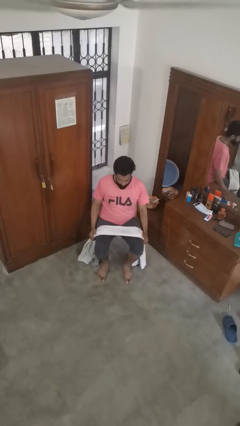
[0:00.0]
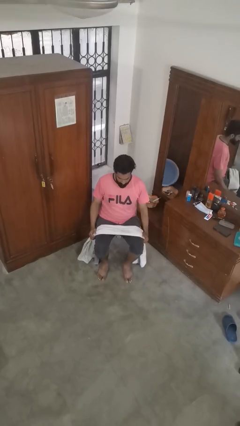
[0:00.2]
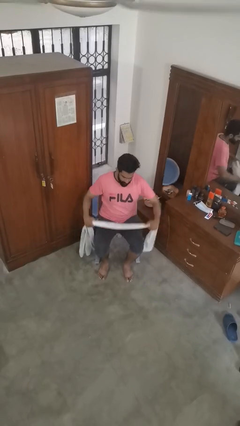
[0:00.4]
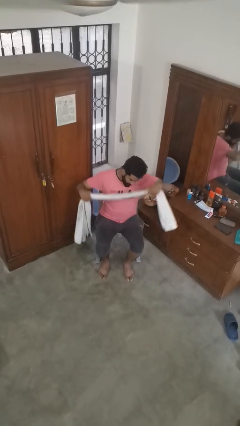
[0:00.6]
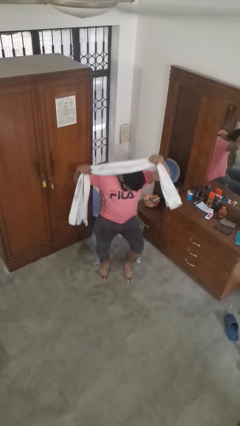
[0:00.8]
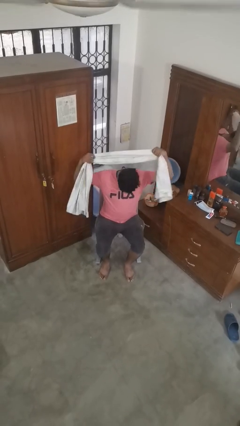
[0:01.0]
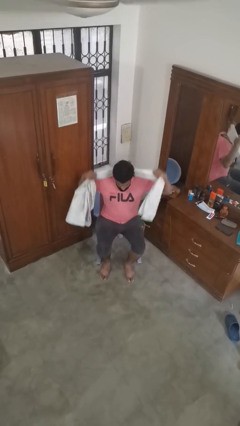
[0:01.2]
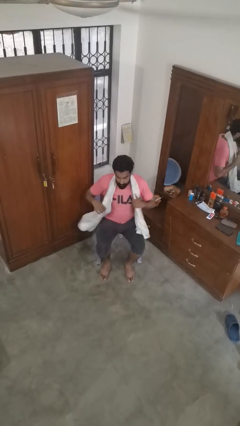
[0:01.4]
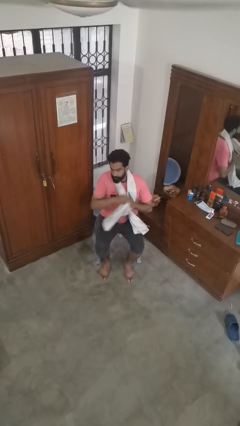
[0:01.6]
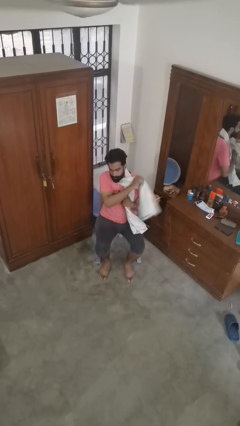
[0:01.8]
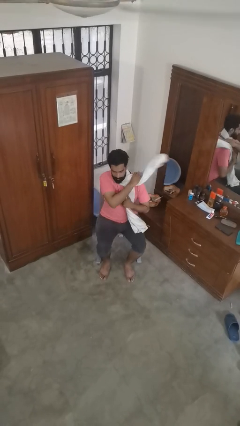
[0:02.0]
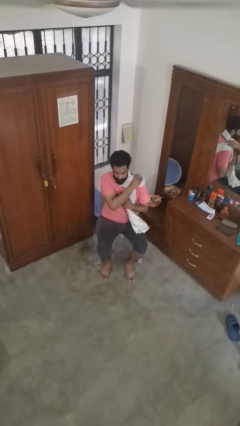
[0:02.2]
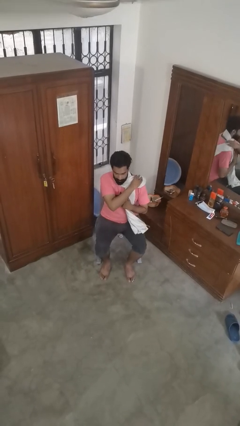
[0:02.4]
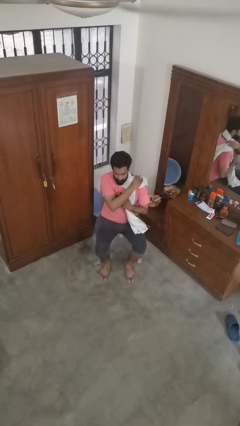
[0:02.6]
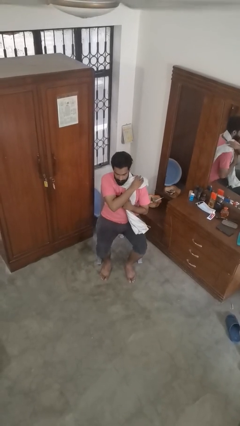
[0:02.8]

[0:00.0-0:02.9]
person puts on scarf

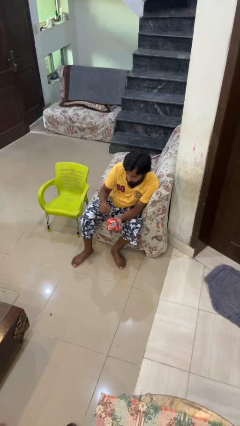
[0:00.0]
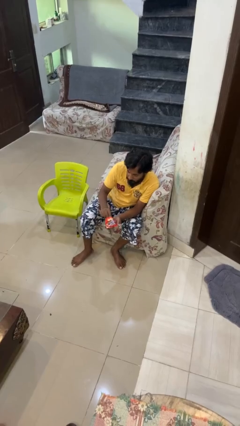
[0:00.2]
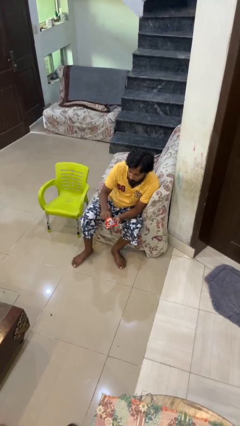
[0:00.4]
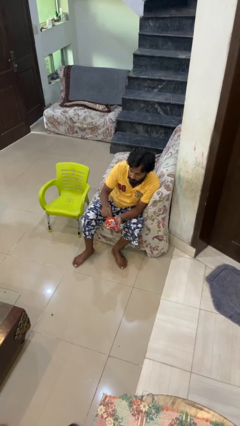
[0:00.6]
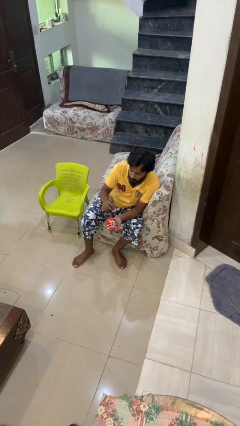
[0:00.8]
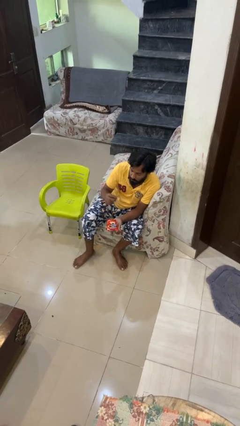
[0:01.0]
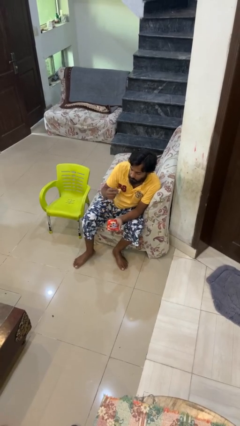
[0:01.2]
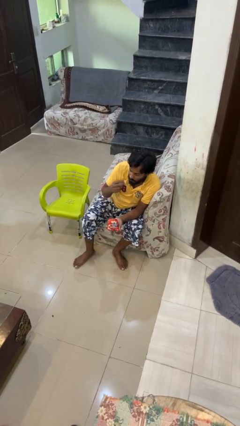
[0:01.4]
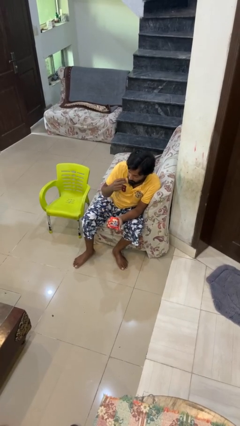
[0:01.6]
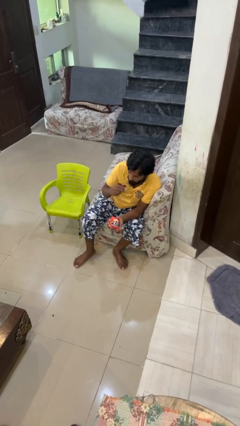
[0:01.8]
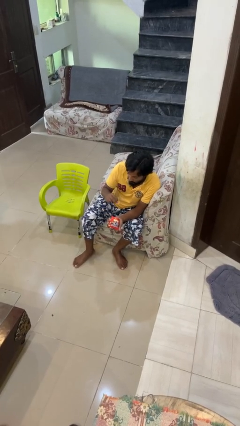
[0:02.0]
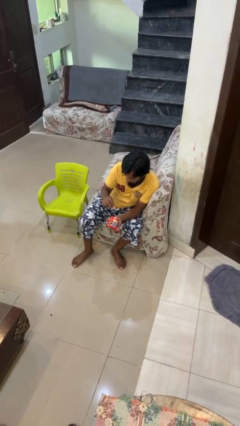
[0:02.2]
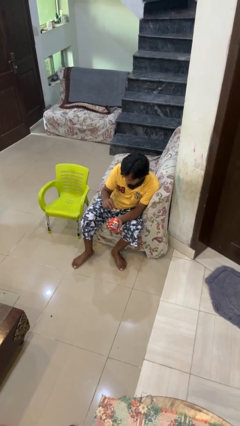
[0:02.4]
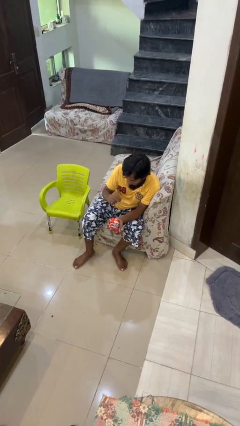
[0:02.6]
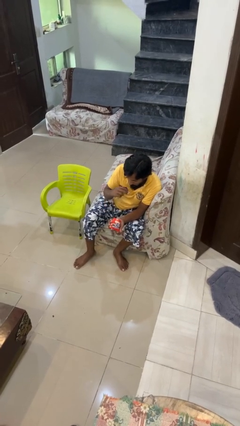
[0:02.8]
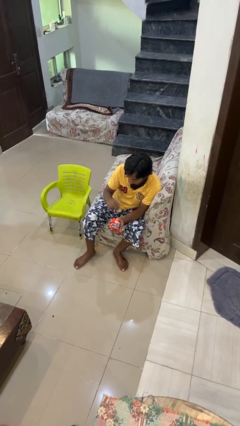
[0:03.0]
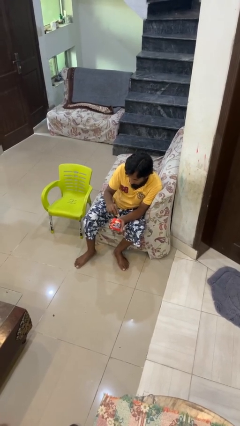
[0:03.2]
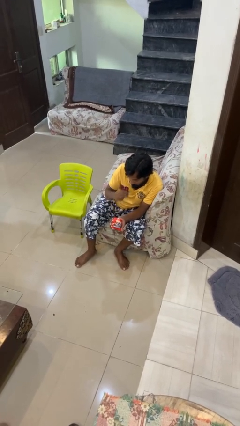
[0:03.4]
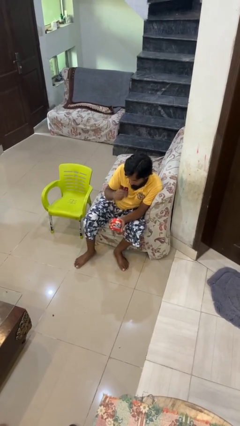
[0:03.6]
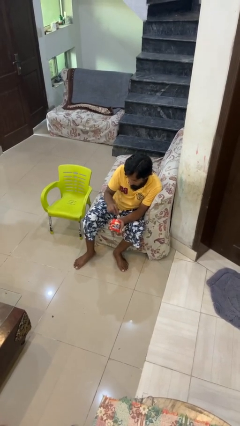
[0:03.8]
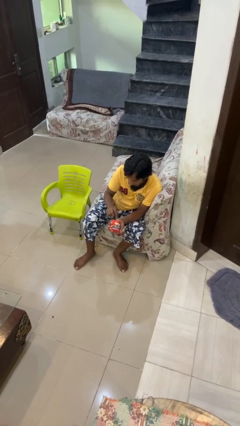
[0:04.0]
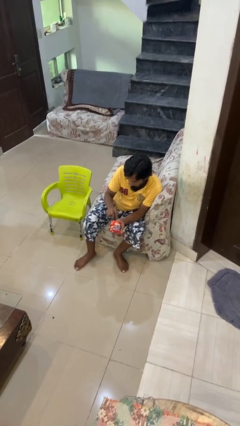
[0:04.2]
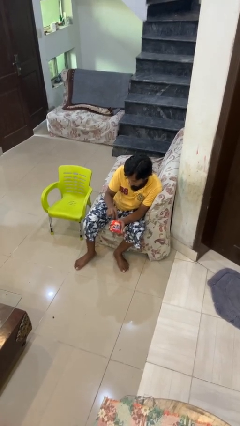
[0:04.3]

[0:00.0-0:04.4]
person eats snack from bag

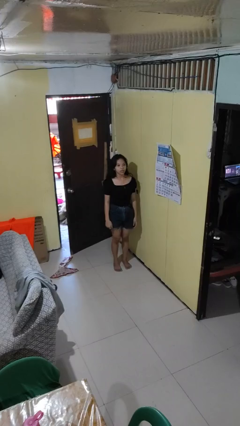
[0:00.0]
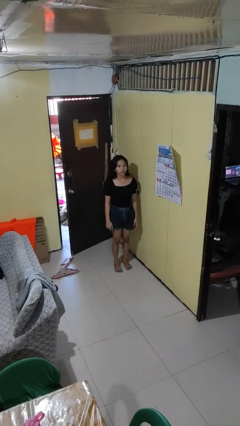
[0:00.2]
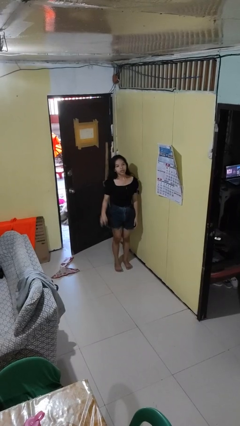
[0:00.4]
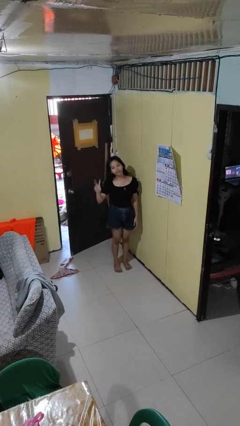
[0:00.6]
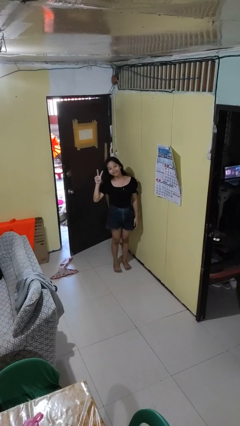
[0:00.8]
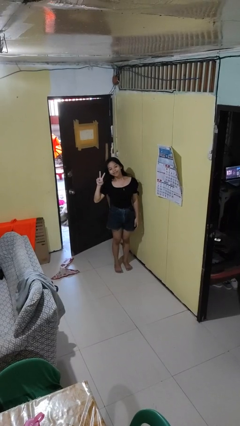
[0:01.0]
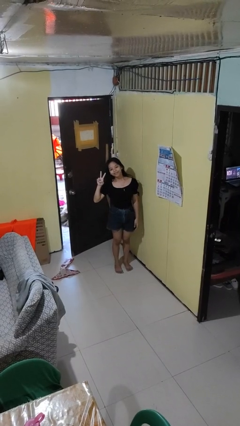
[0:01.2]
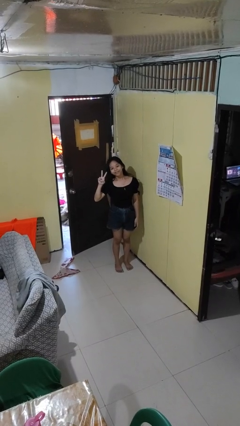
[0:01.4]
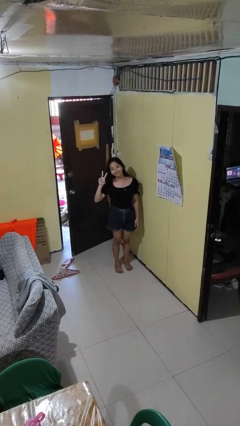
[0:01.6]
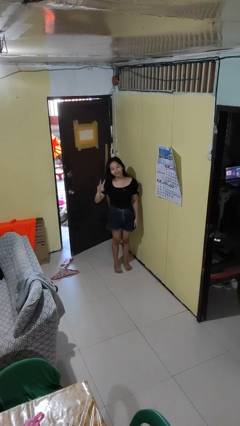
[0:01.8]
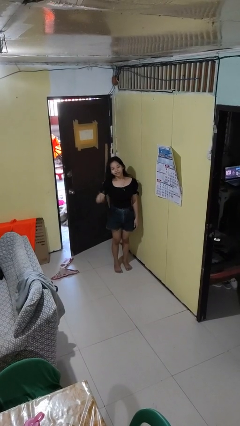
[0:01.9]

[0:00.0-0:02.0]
person gestures peace

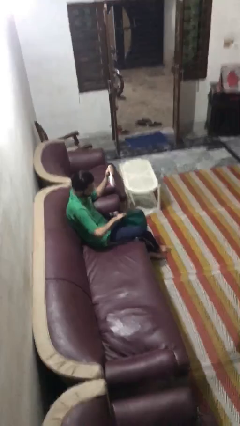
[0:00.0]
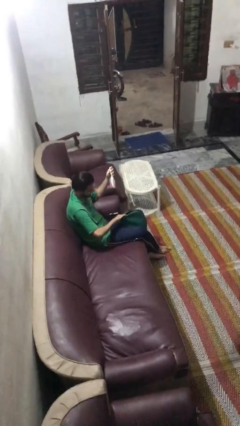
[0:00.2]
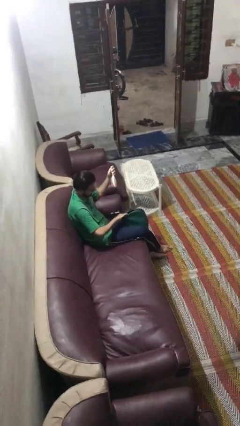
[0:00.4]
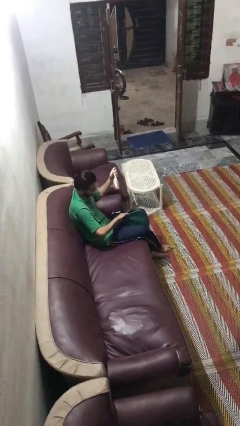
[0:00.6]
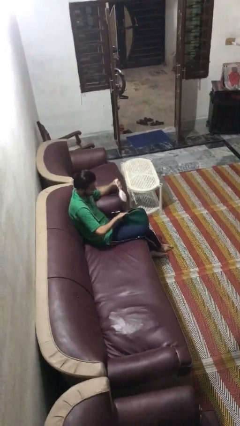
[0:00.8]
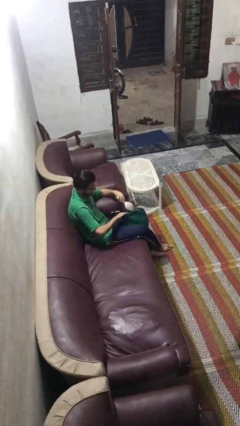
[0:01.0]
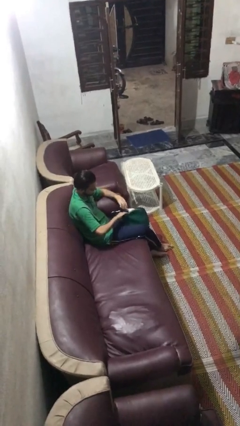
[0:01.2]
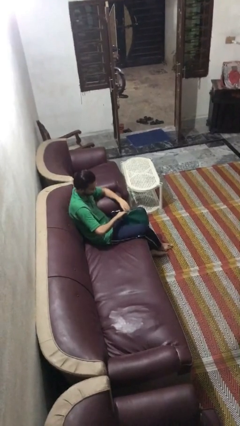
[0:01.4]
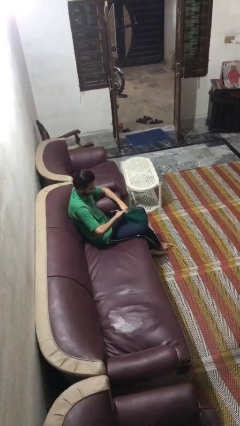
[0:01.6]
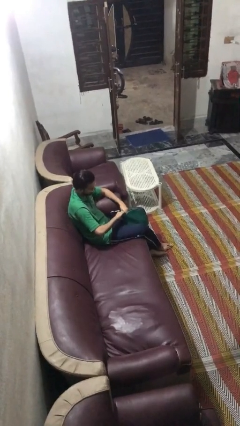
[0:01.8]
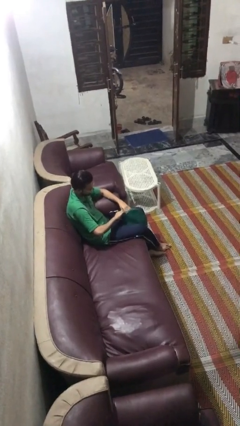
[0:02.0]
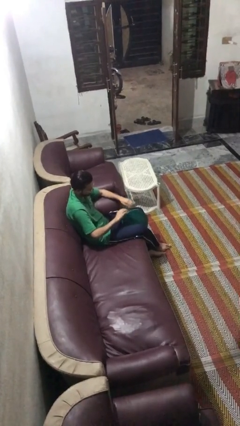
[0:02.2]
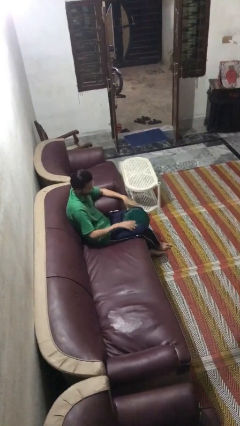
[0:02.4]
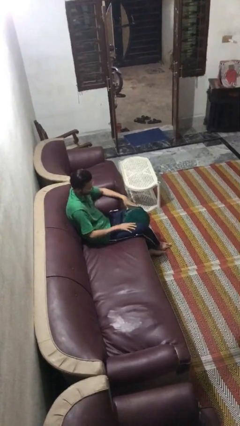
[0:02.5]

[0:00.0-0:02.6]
person puts object into purse

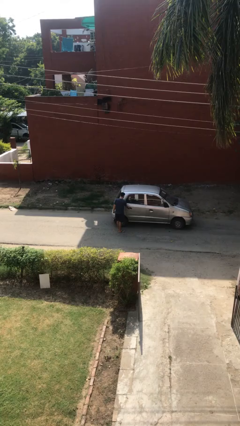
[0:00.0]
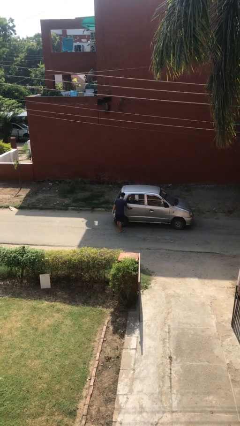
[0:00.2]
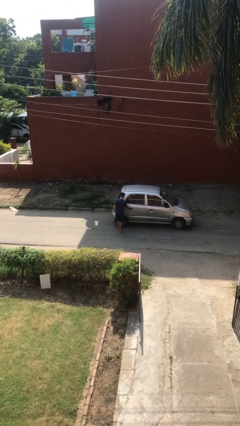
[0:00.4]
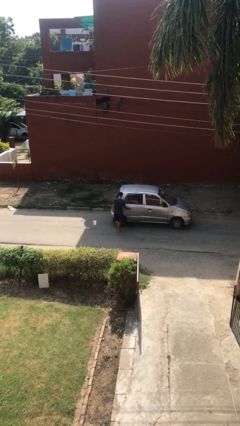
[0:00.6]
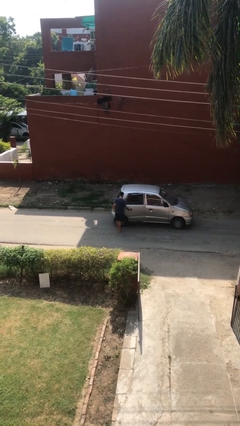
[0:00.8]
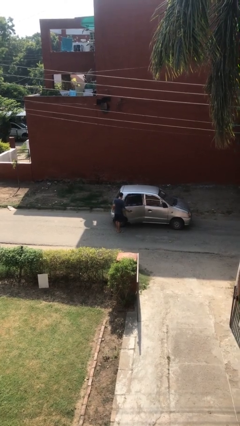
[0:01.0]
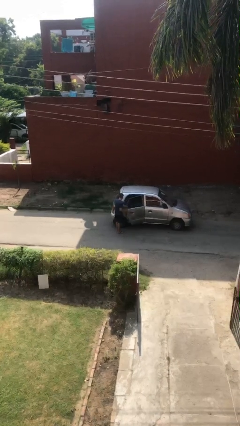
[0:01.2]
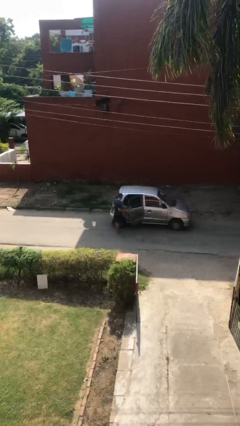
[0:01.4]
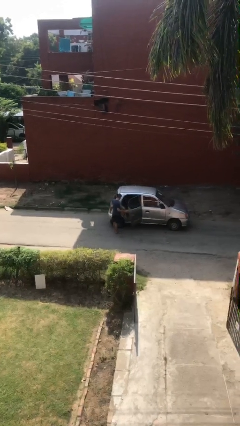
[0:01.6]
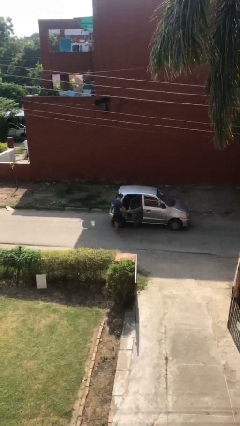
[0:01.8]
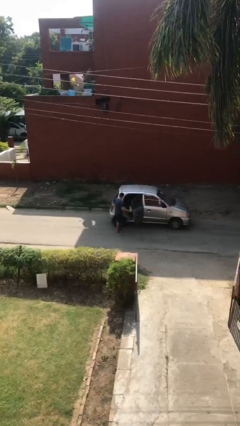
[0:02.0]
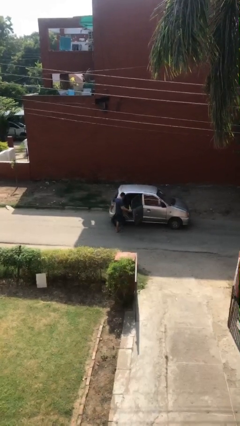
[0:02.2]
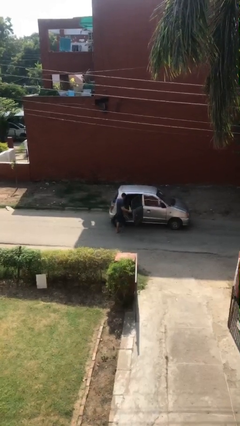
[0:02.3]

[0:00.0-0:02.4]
person opens car door

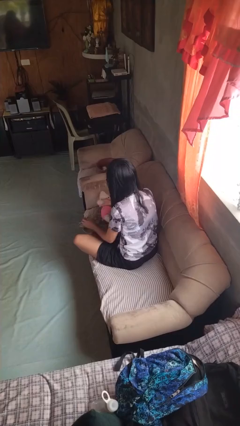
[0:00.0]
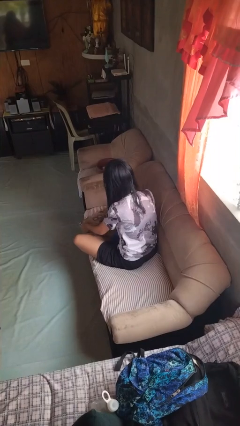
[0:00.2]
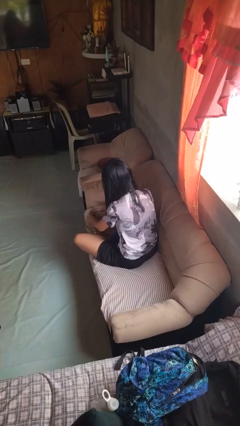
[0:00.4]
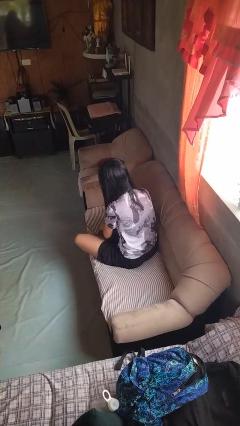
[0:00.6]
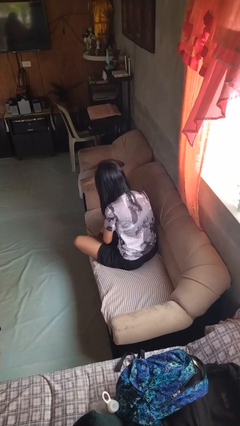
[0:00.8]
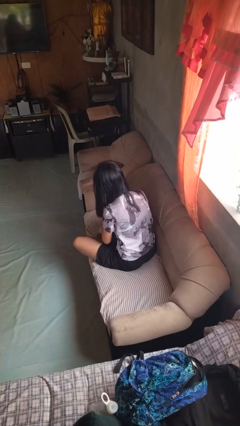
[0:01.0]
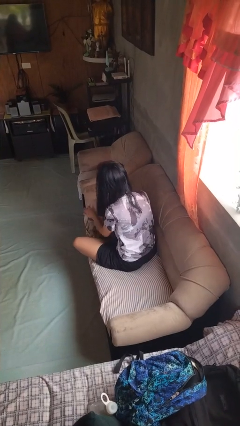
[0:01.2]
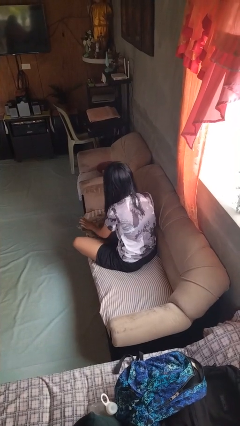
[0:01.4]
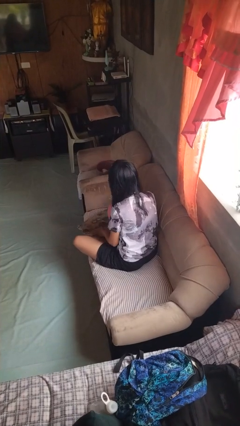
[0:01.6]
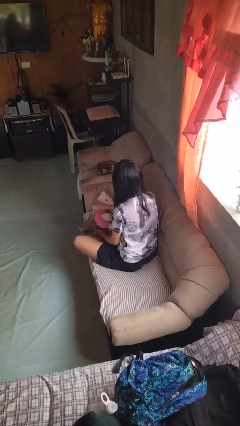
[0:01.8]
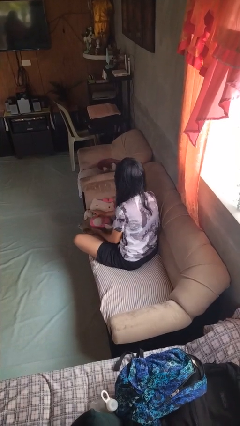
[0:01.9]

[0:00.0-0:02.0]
person searches in couch

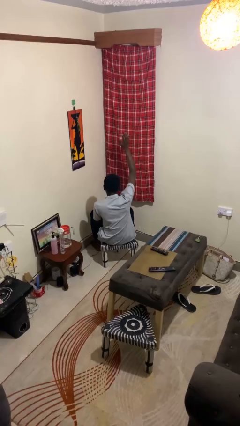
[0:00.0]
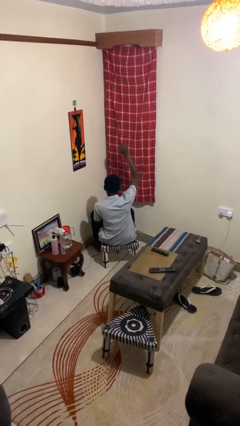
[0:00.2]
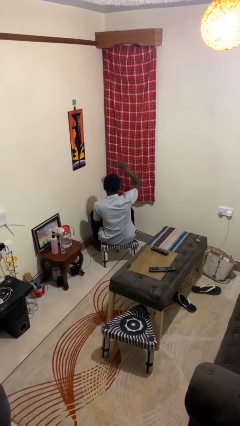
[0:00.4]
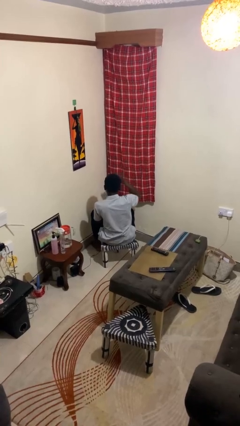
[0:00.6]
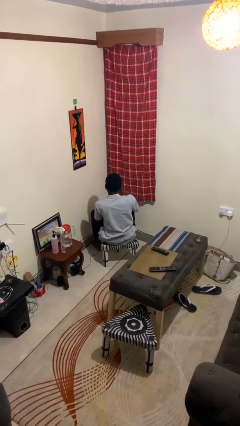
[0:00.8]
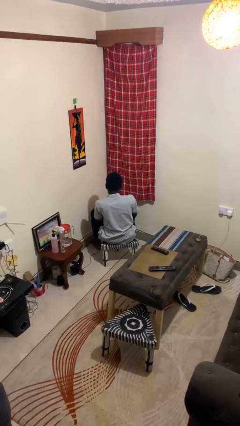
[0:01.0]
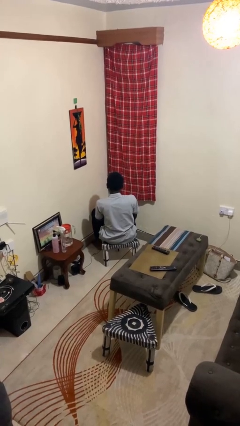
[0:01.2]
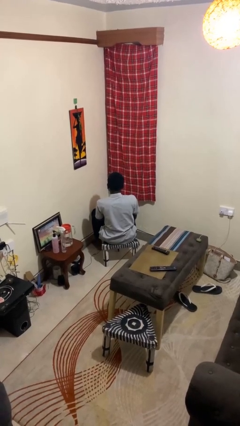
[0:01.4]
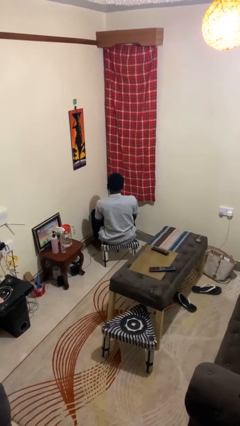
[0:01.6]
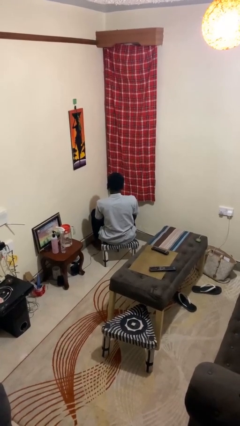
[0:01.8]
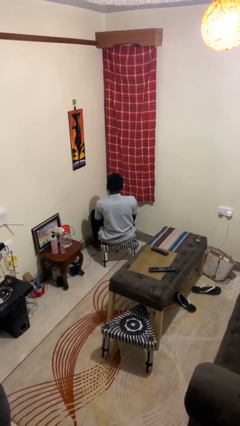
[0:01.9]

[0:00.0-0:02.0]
person gestures lower hand
